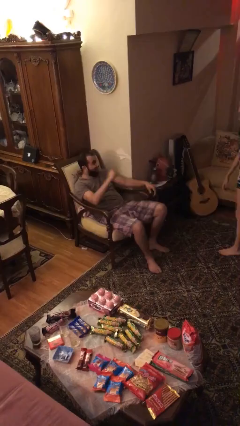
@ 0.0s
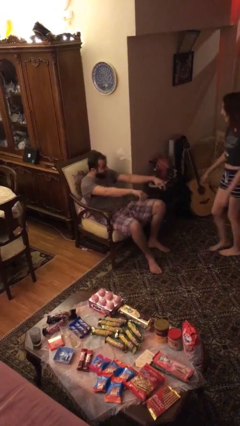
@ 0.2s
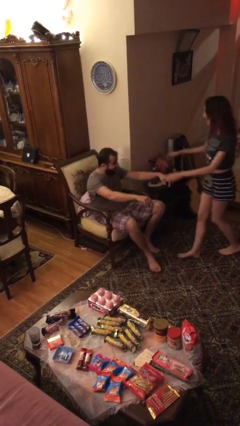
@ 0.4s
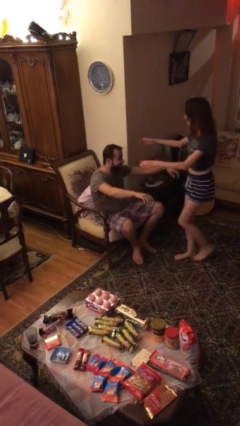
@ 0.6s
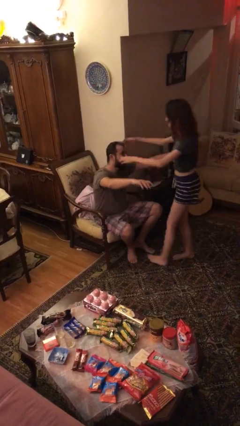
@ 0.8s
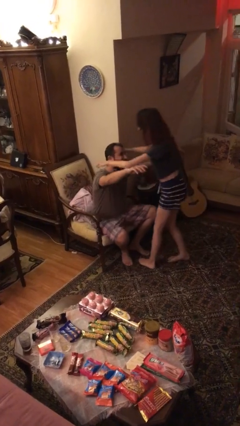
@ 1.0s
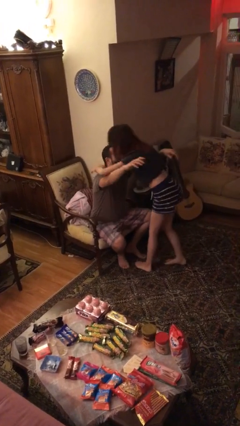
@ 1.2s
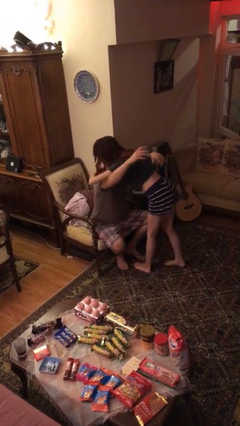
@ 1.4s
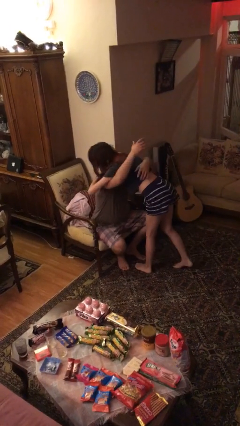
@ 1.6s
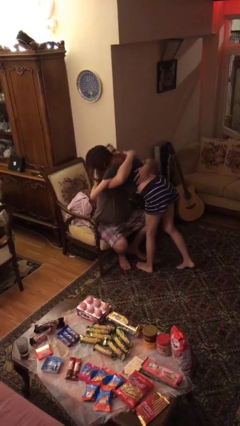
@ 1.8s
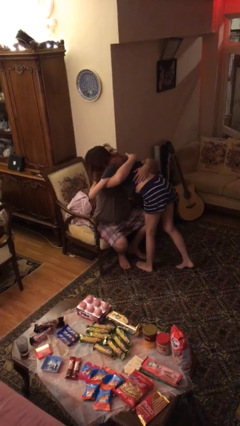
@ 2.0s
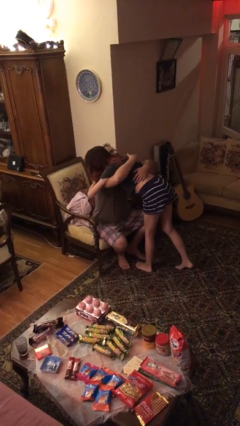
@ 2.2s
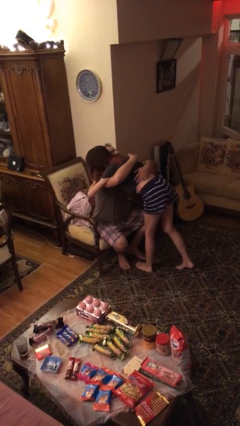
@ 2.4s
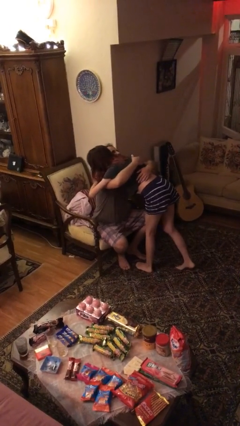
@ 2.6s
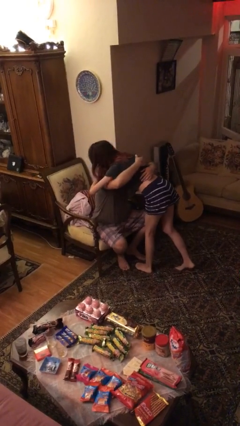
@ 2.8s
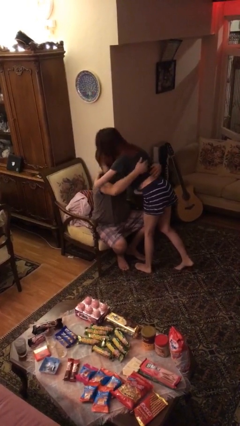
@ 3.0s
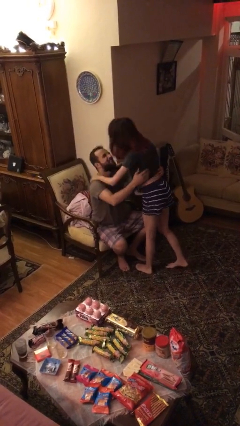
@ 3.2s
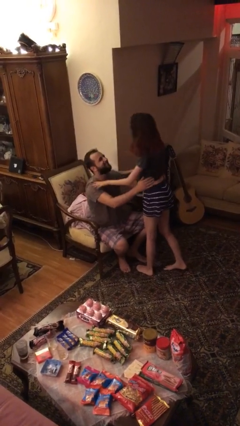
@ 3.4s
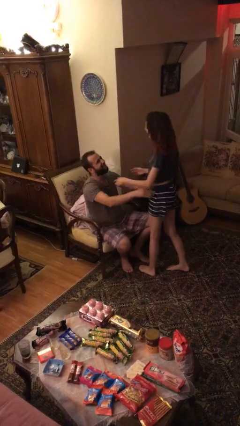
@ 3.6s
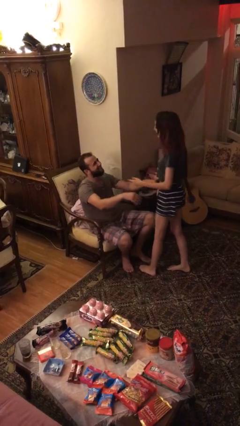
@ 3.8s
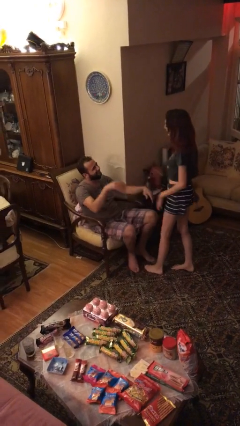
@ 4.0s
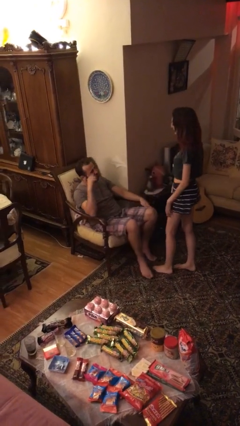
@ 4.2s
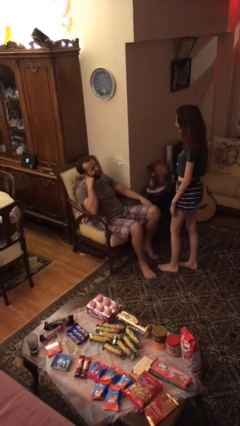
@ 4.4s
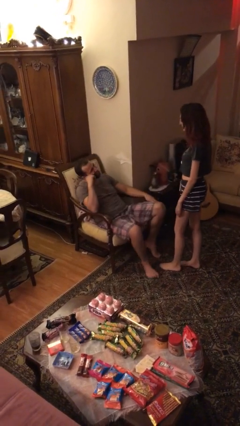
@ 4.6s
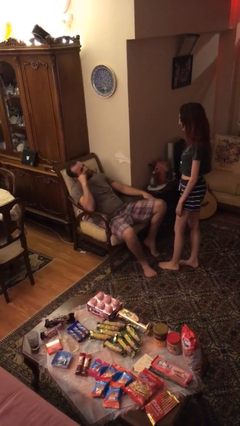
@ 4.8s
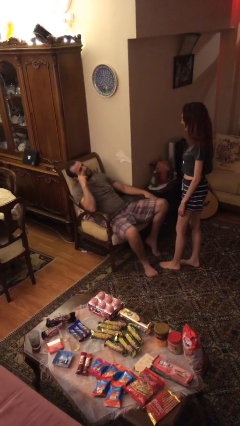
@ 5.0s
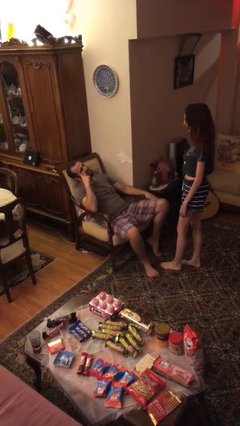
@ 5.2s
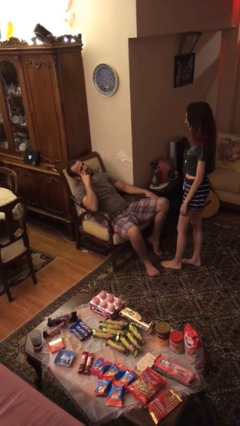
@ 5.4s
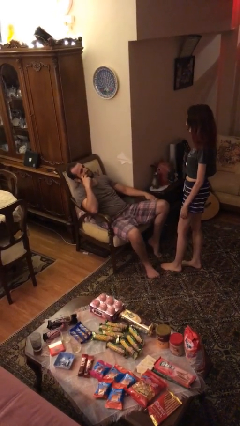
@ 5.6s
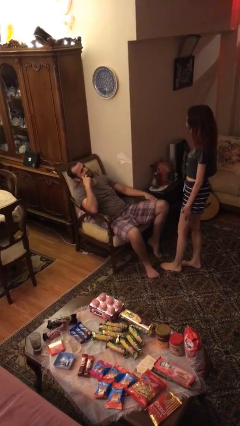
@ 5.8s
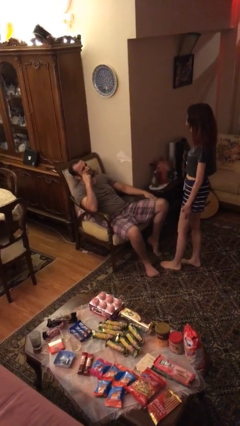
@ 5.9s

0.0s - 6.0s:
person embraces person

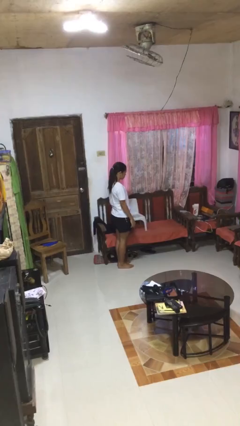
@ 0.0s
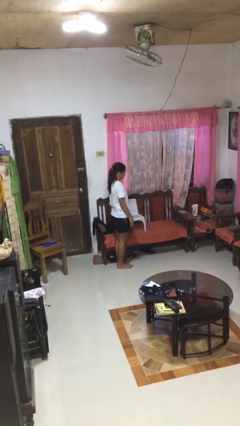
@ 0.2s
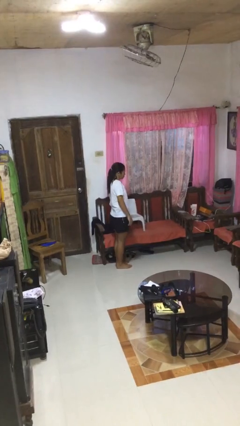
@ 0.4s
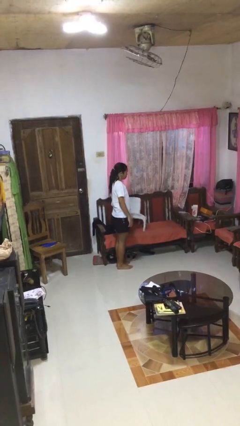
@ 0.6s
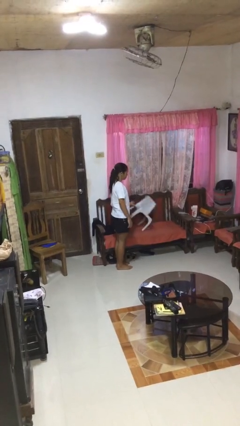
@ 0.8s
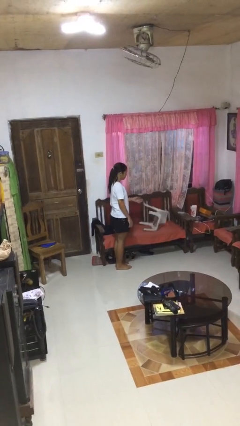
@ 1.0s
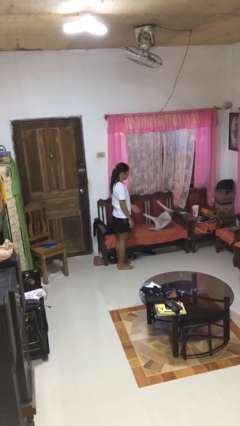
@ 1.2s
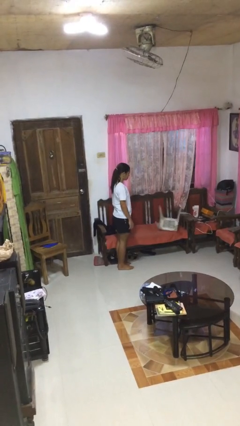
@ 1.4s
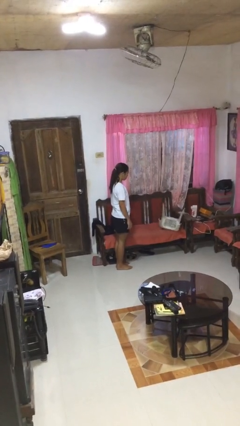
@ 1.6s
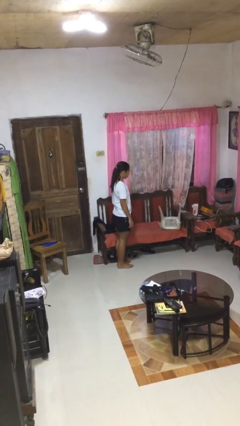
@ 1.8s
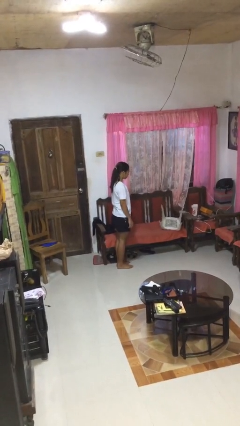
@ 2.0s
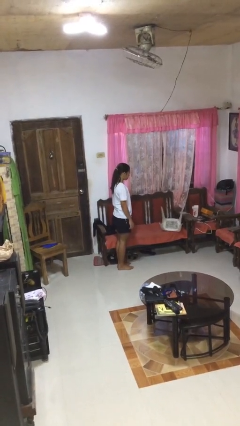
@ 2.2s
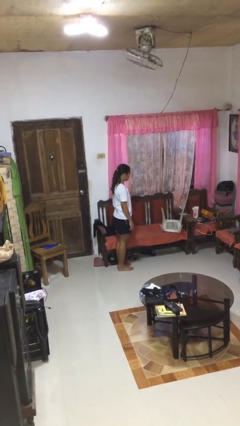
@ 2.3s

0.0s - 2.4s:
person knocks over furniture

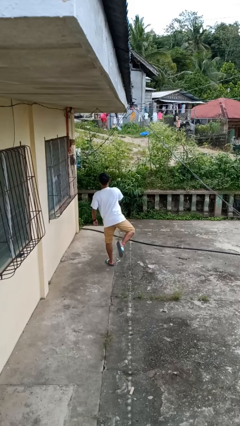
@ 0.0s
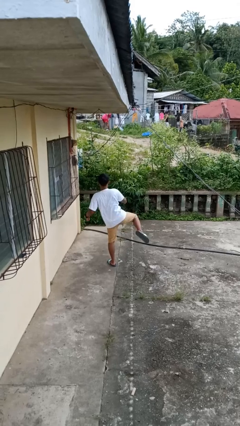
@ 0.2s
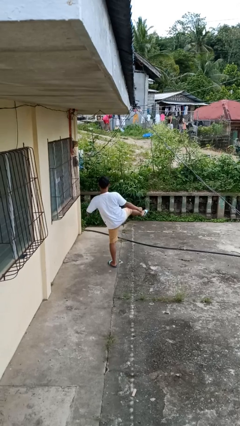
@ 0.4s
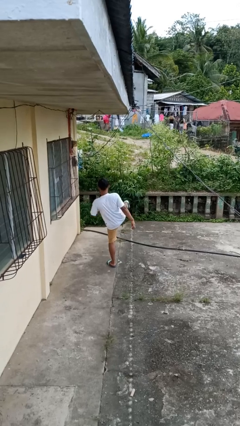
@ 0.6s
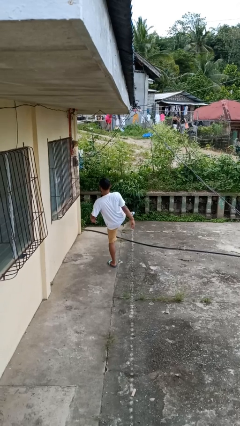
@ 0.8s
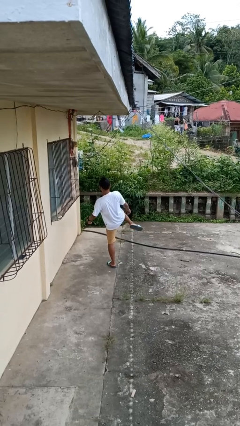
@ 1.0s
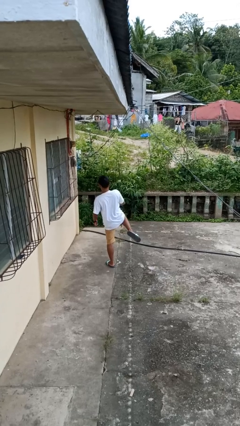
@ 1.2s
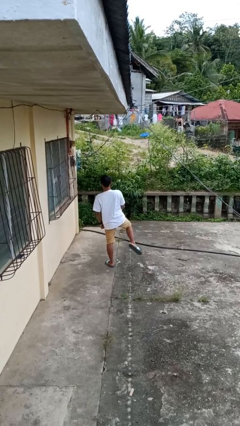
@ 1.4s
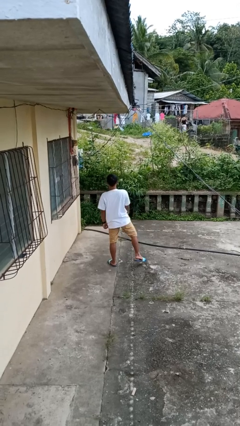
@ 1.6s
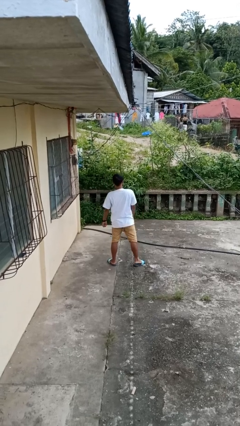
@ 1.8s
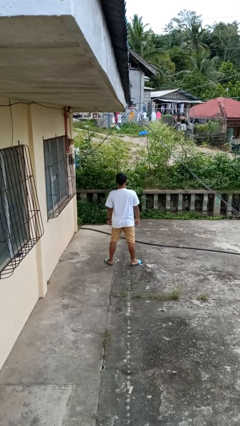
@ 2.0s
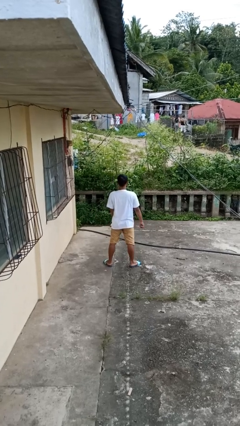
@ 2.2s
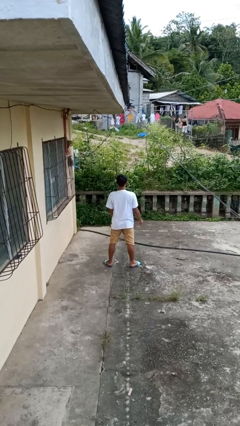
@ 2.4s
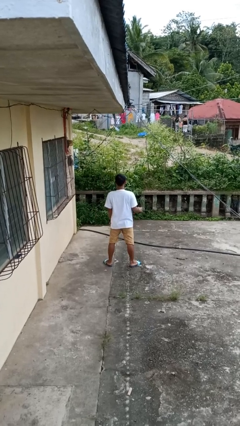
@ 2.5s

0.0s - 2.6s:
person karate kicks

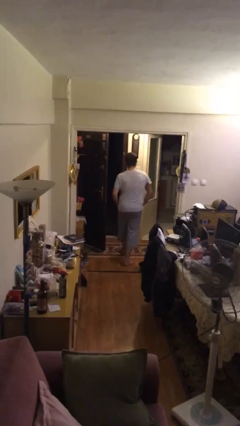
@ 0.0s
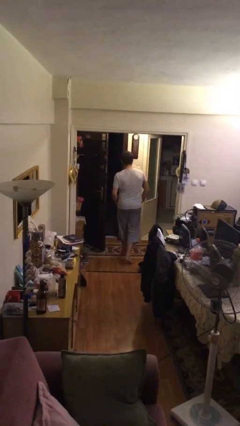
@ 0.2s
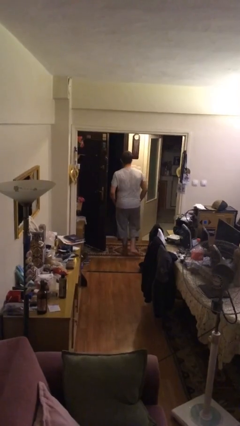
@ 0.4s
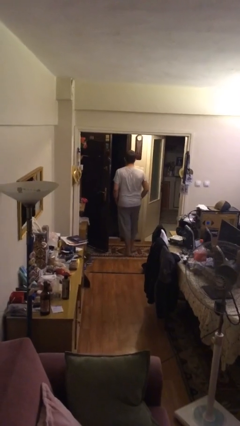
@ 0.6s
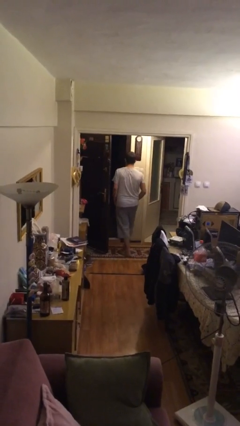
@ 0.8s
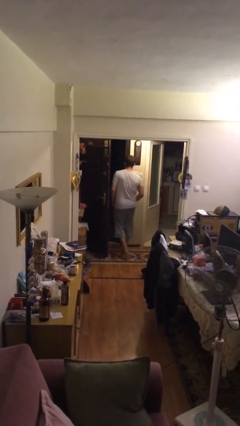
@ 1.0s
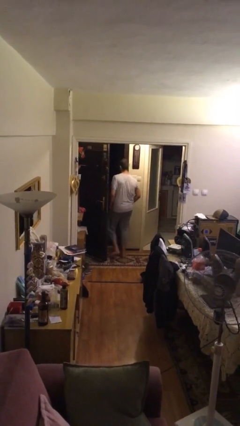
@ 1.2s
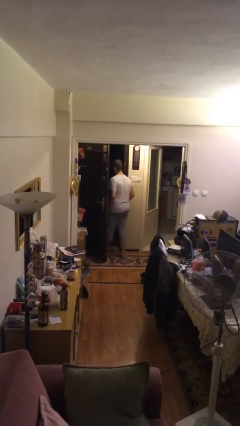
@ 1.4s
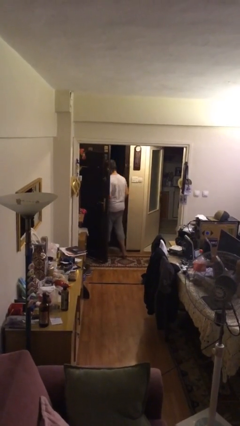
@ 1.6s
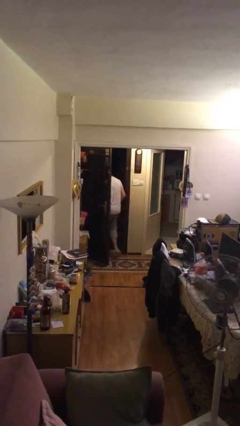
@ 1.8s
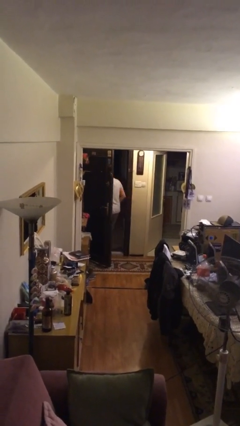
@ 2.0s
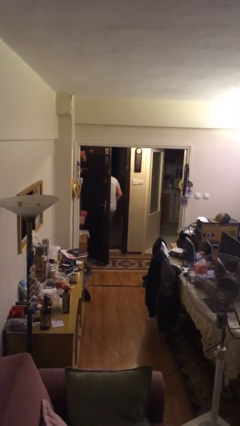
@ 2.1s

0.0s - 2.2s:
person exits scene through structure

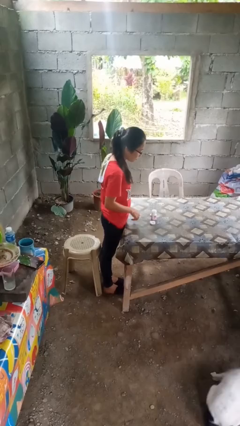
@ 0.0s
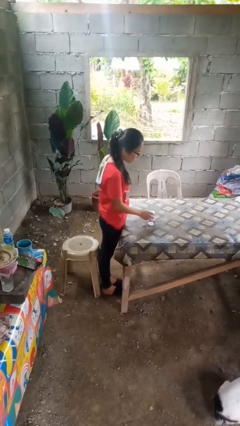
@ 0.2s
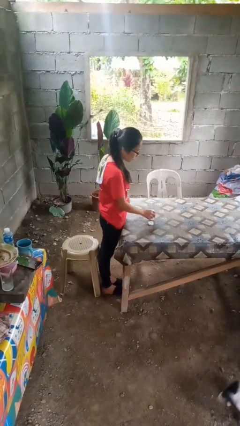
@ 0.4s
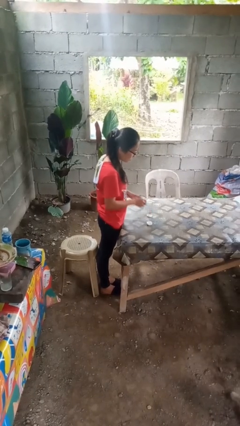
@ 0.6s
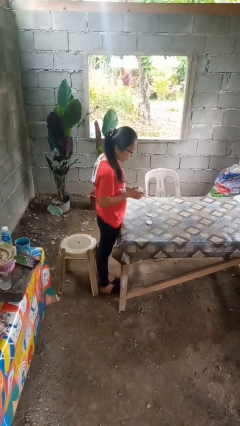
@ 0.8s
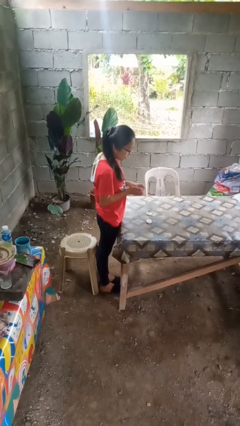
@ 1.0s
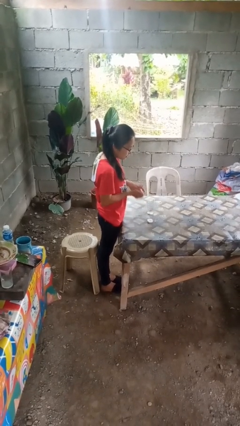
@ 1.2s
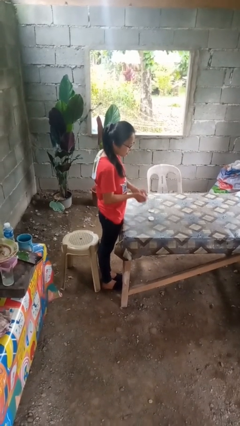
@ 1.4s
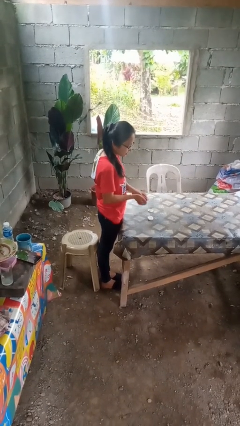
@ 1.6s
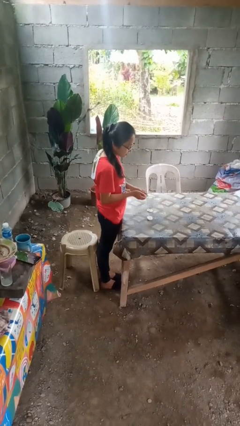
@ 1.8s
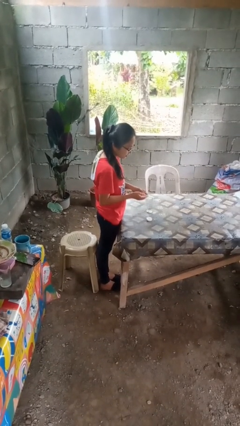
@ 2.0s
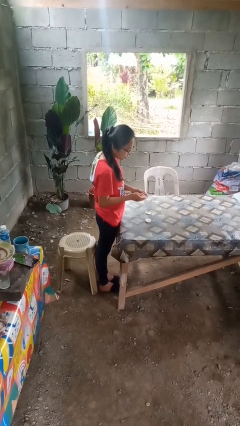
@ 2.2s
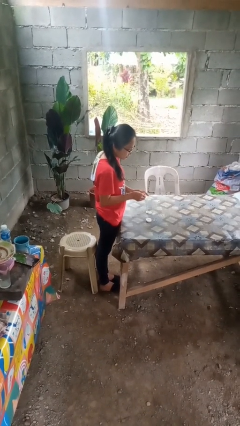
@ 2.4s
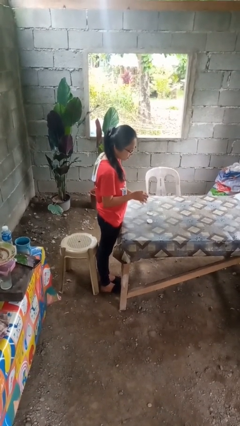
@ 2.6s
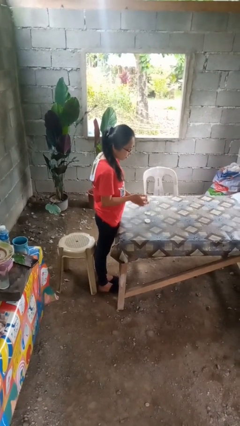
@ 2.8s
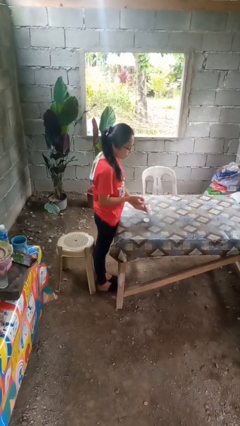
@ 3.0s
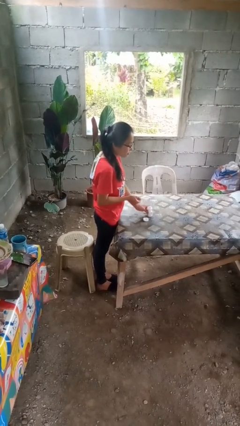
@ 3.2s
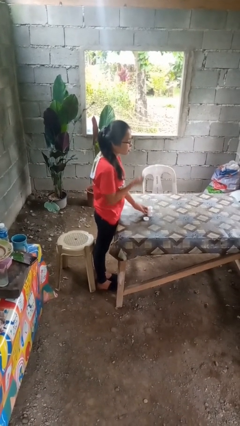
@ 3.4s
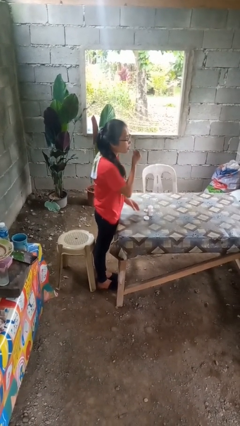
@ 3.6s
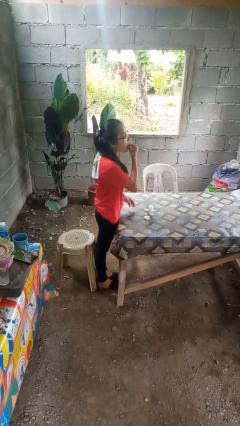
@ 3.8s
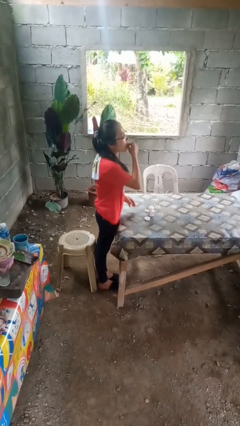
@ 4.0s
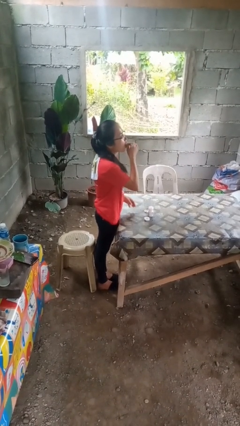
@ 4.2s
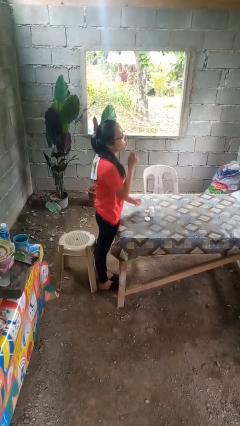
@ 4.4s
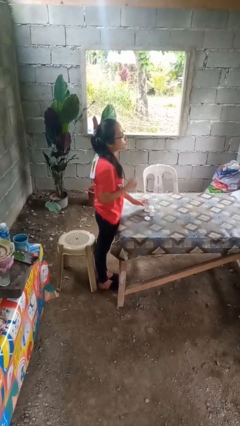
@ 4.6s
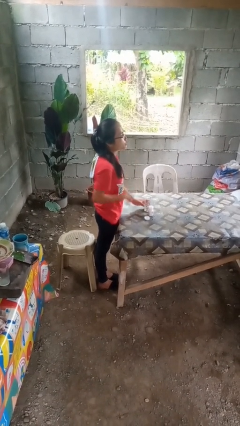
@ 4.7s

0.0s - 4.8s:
person takes medicine pills
